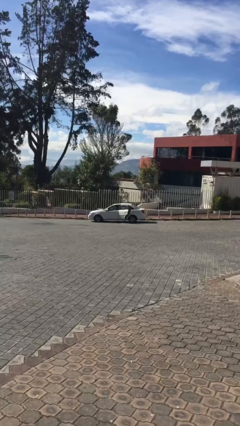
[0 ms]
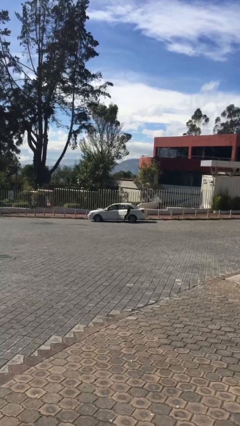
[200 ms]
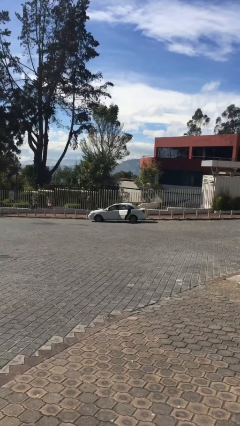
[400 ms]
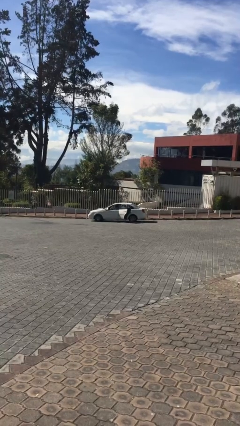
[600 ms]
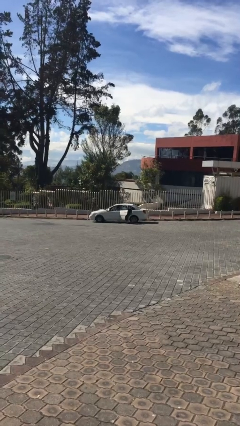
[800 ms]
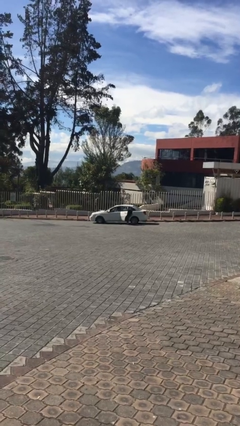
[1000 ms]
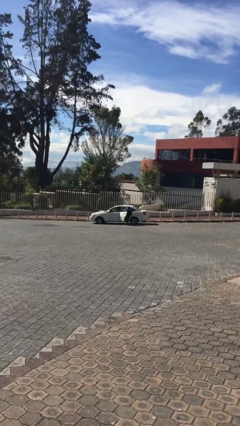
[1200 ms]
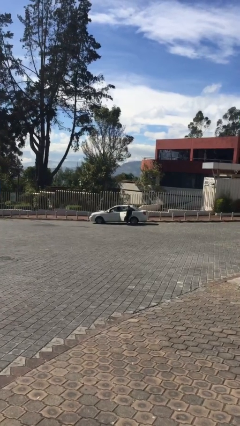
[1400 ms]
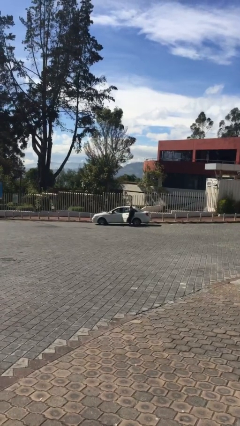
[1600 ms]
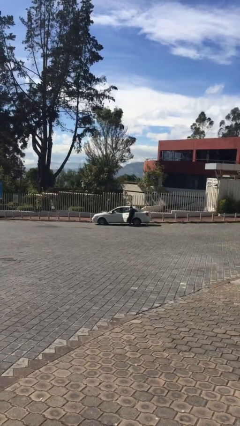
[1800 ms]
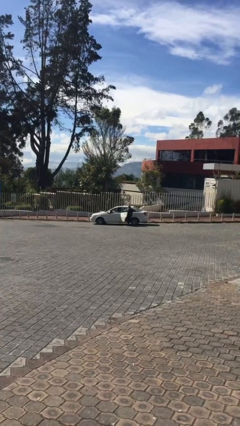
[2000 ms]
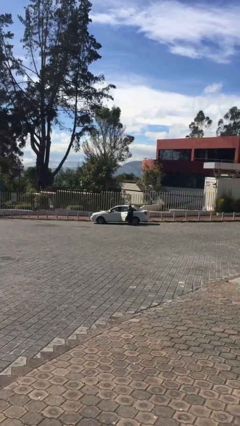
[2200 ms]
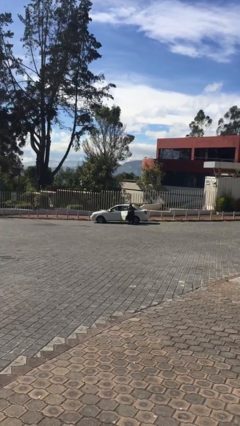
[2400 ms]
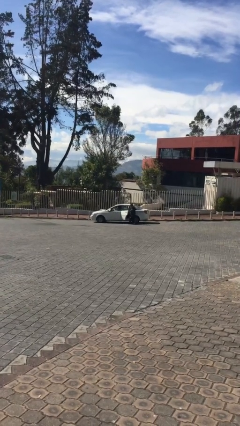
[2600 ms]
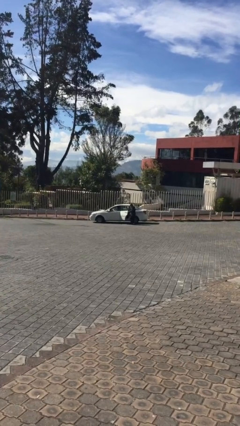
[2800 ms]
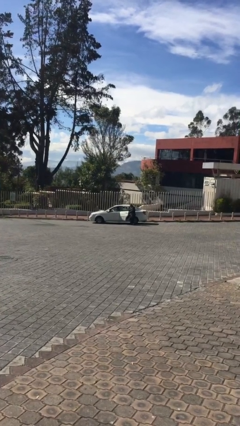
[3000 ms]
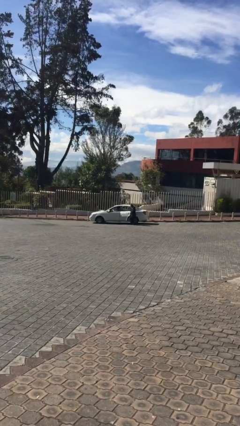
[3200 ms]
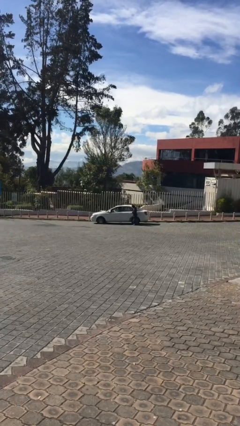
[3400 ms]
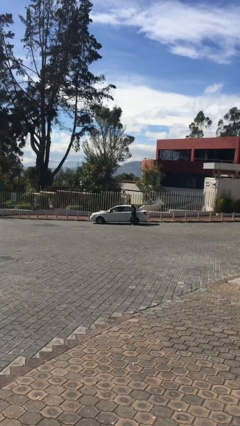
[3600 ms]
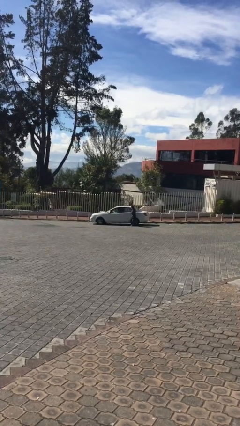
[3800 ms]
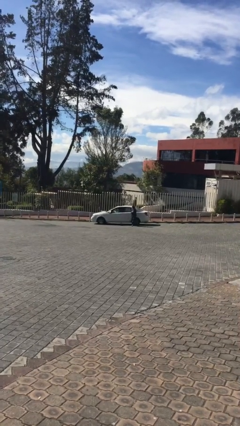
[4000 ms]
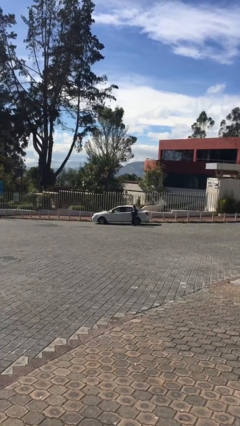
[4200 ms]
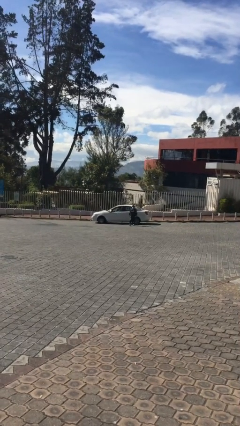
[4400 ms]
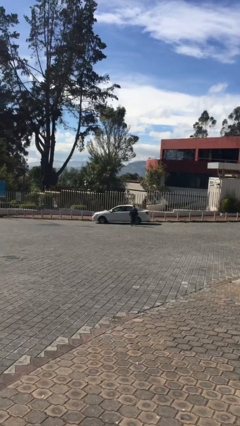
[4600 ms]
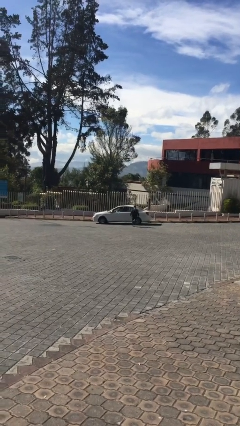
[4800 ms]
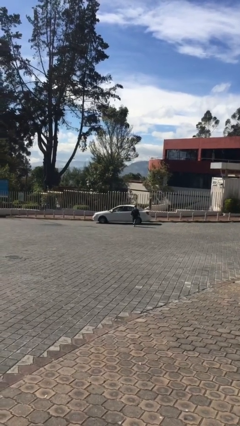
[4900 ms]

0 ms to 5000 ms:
car drops off person

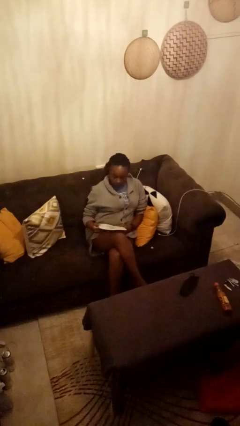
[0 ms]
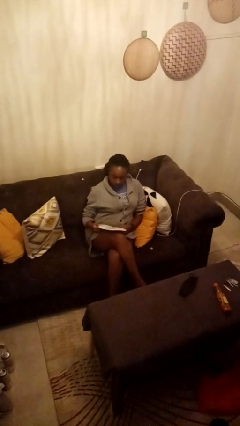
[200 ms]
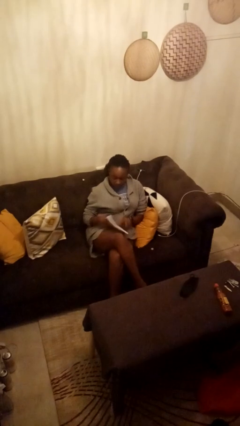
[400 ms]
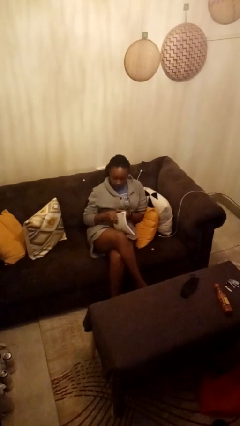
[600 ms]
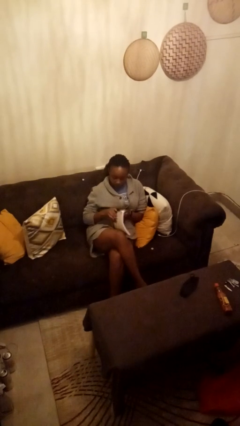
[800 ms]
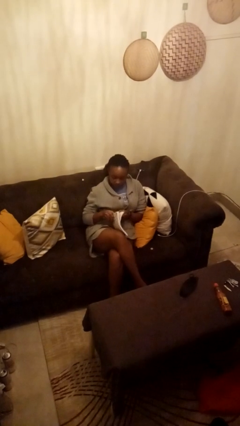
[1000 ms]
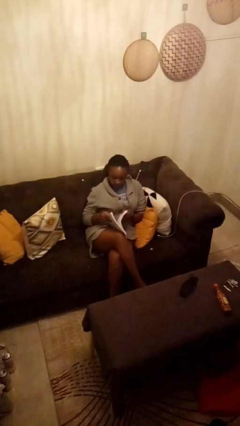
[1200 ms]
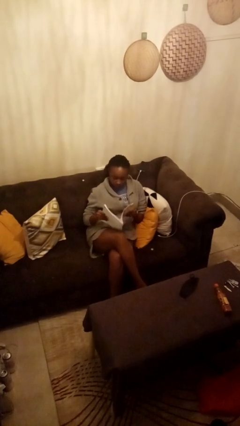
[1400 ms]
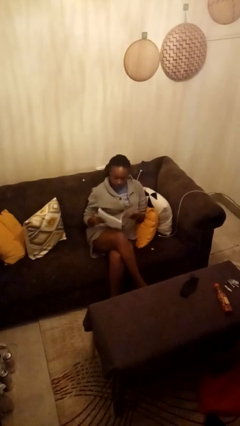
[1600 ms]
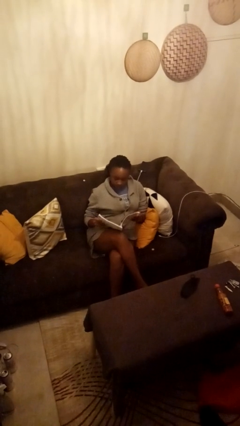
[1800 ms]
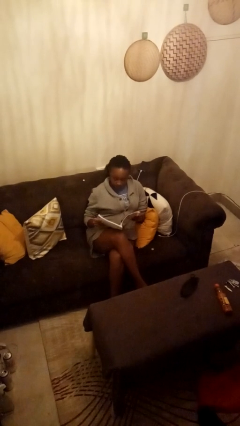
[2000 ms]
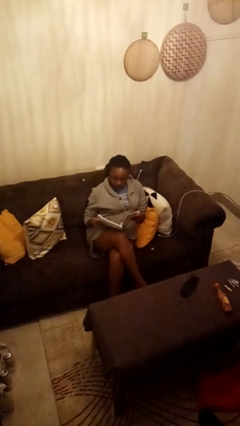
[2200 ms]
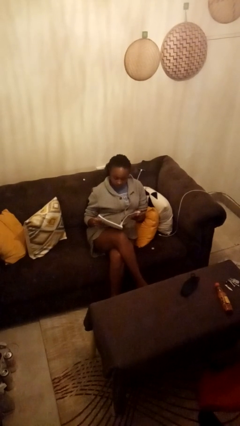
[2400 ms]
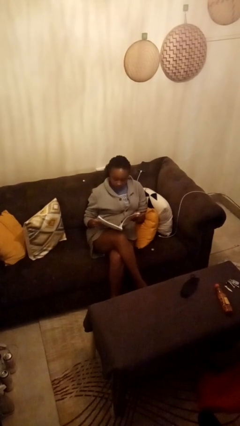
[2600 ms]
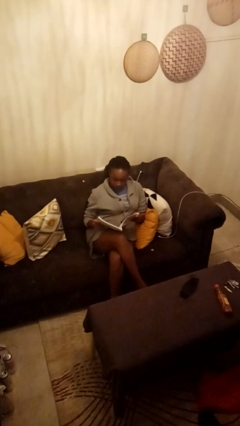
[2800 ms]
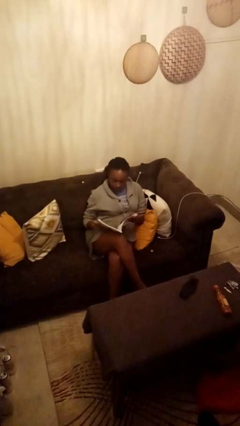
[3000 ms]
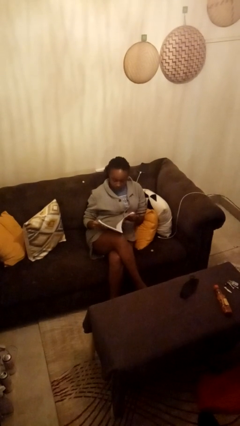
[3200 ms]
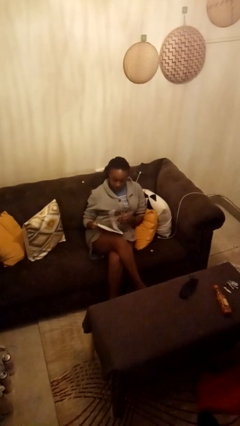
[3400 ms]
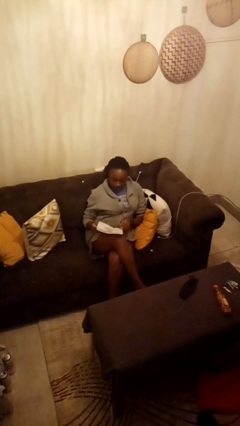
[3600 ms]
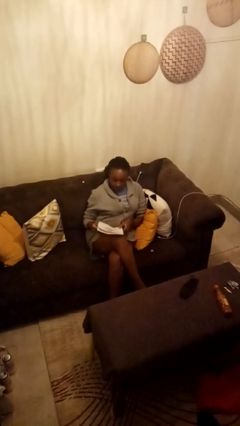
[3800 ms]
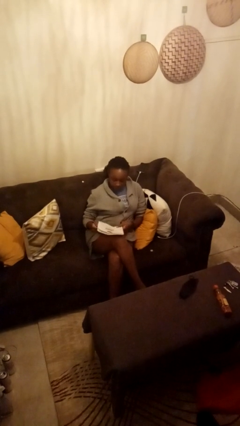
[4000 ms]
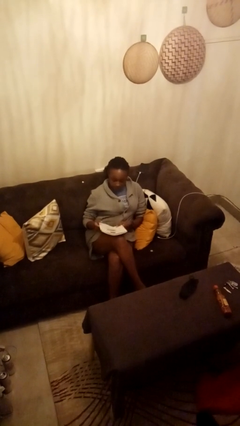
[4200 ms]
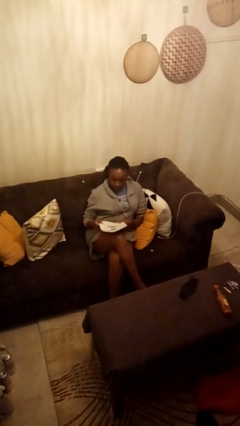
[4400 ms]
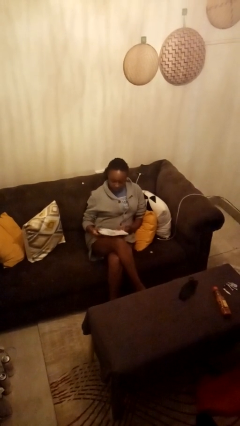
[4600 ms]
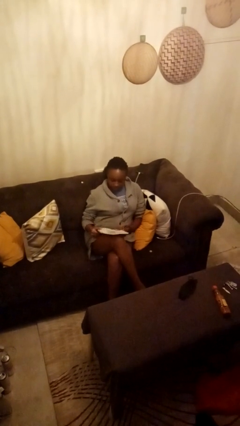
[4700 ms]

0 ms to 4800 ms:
person reads magazine

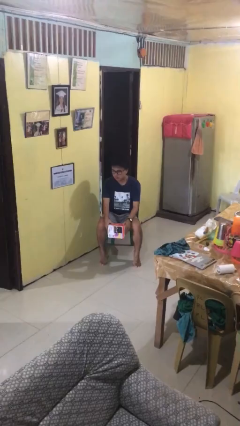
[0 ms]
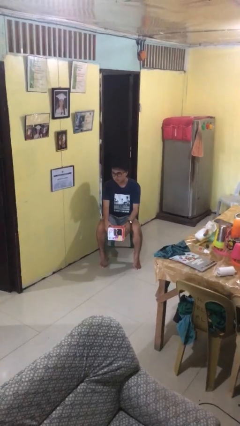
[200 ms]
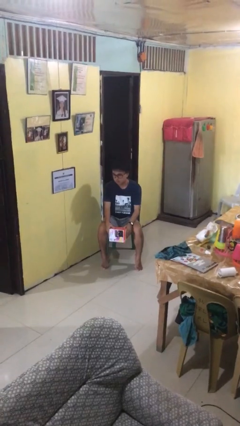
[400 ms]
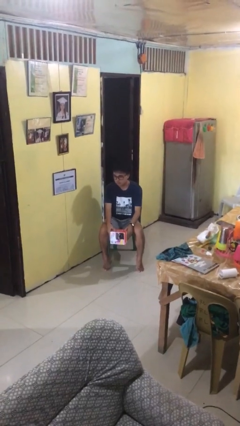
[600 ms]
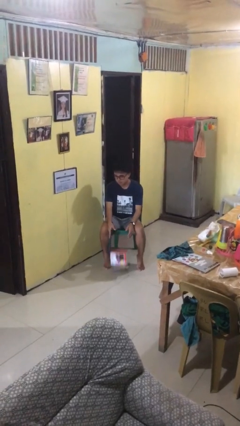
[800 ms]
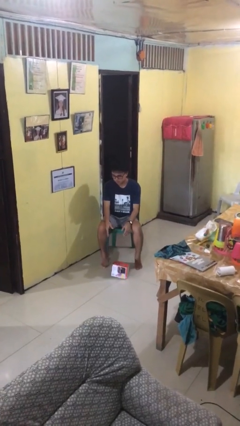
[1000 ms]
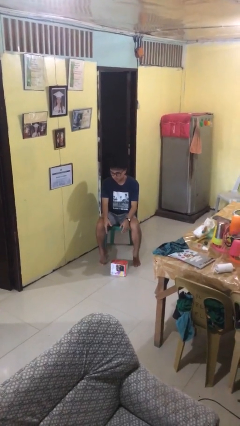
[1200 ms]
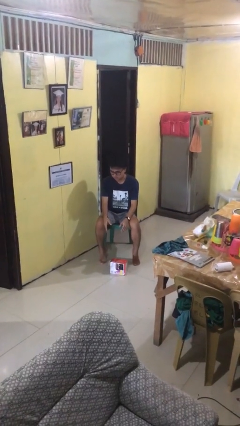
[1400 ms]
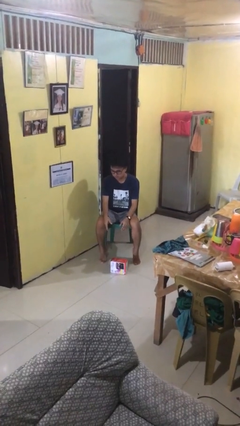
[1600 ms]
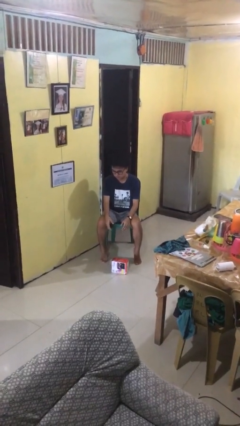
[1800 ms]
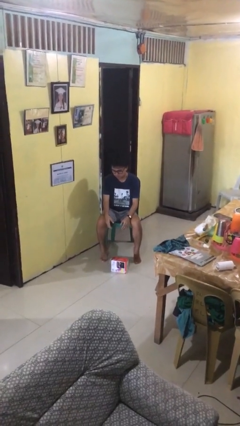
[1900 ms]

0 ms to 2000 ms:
person drops object

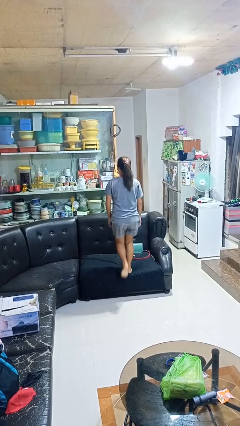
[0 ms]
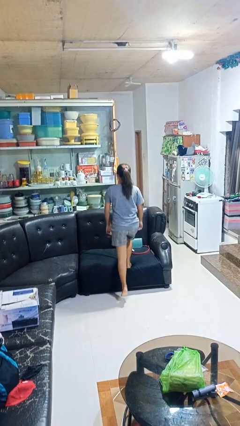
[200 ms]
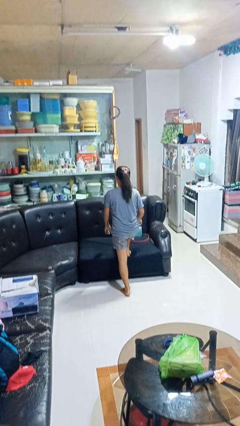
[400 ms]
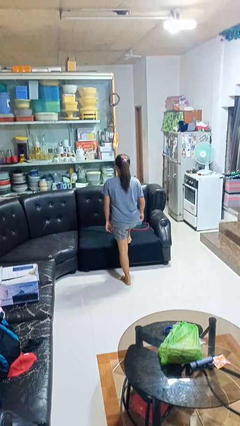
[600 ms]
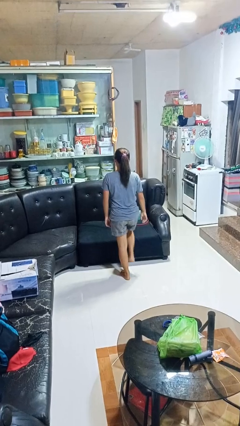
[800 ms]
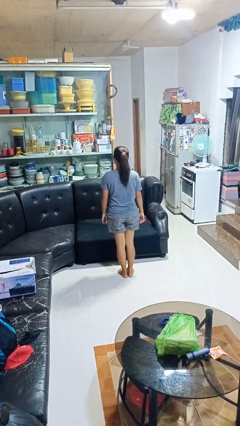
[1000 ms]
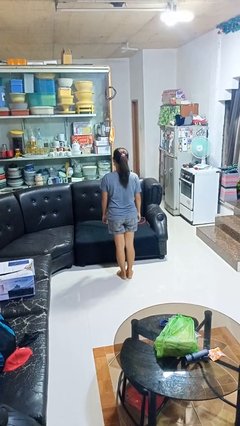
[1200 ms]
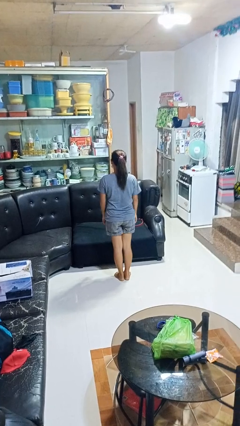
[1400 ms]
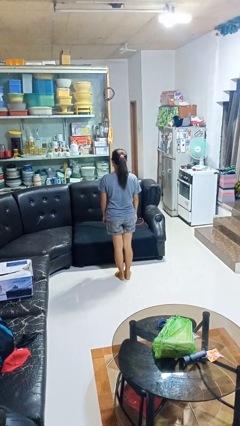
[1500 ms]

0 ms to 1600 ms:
person climbs off couch

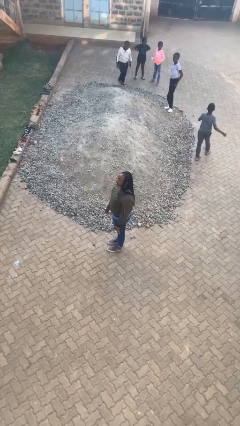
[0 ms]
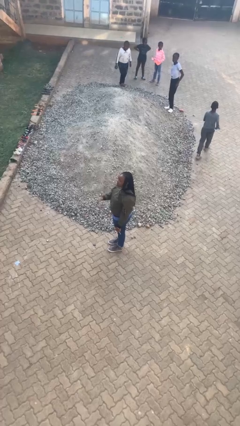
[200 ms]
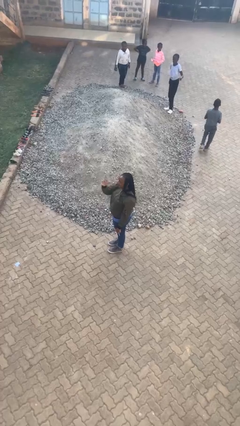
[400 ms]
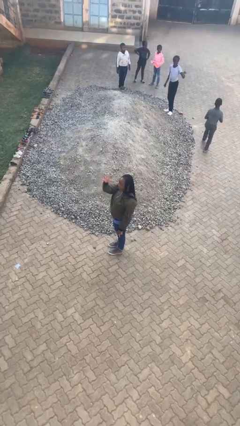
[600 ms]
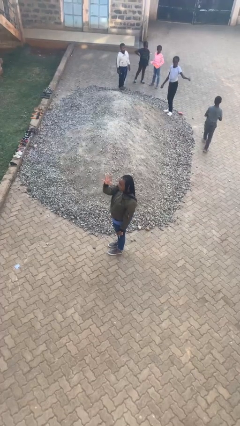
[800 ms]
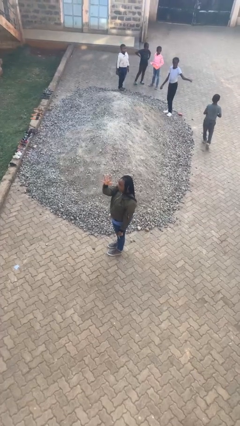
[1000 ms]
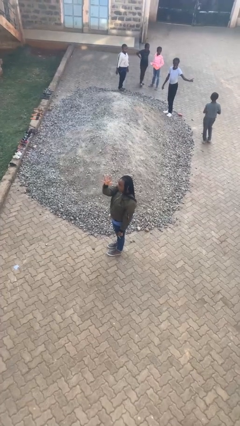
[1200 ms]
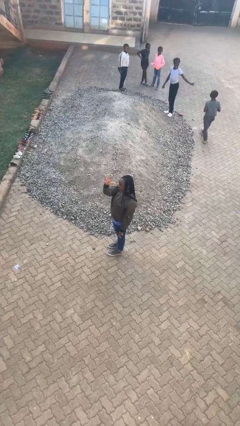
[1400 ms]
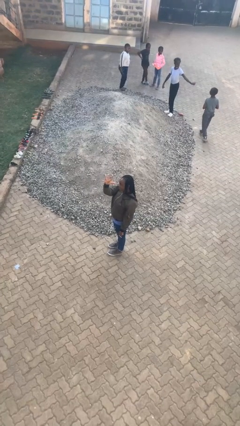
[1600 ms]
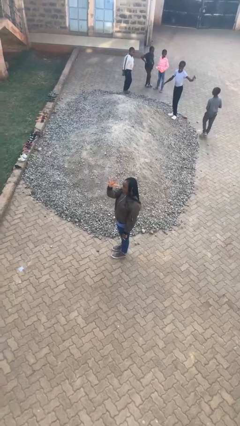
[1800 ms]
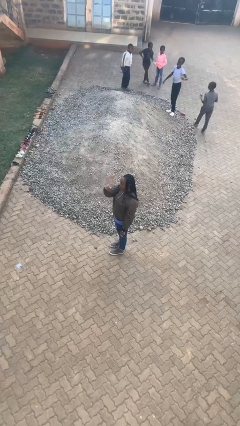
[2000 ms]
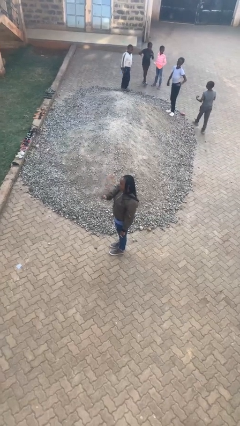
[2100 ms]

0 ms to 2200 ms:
person gestures number five

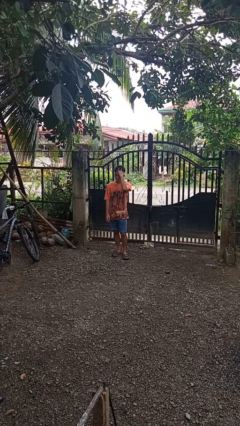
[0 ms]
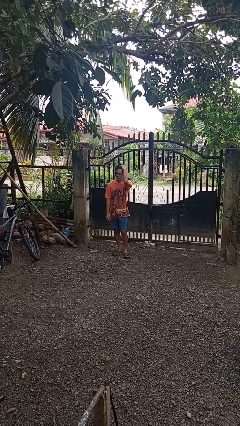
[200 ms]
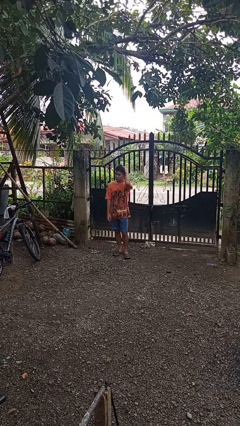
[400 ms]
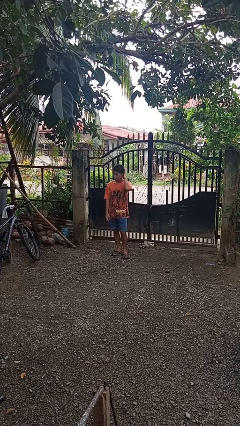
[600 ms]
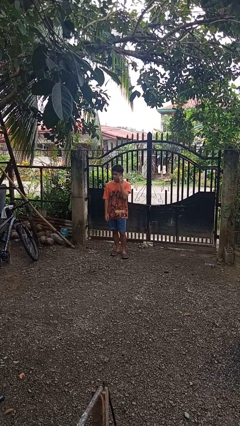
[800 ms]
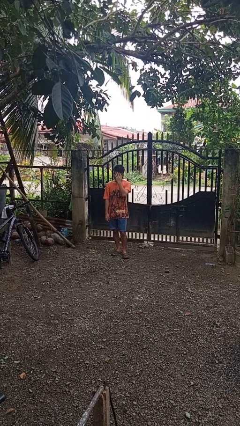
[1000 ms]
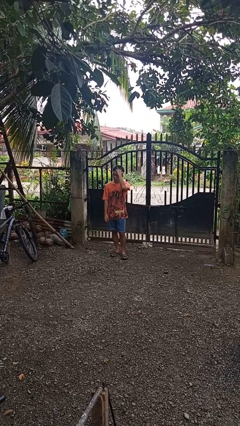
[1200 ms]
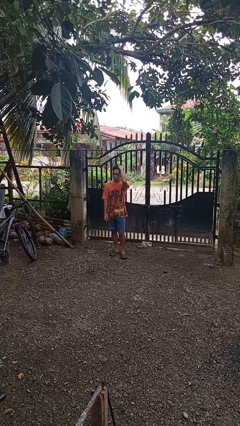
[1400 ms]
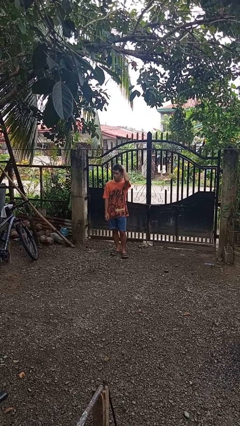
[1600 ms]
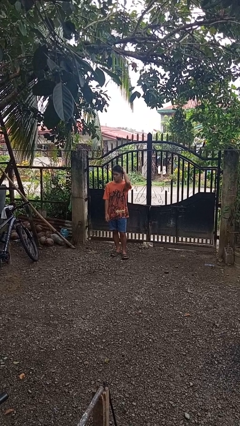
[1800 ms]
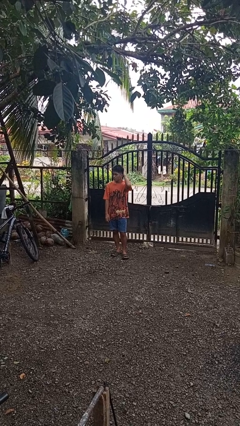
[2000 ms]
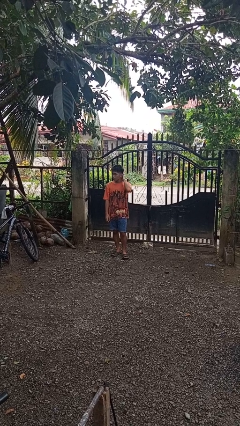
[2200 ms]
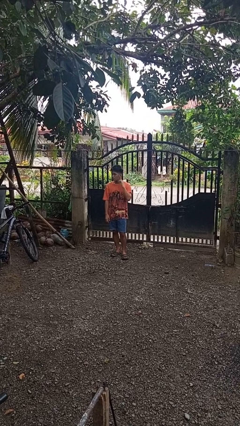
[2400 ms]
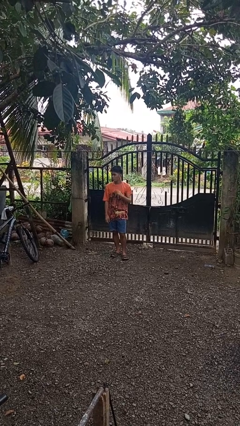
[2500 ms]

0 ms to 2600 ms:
person strokes hair
